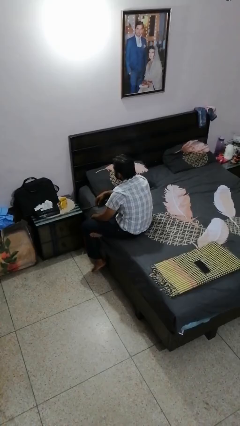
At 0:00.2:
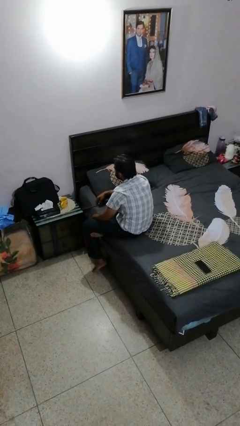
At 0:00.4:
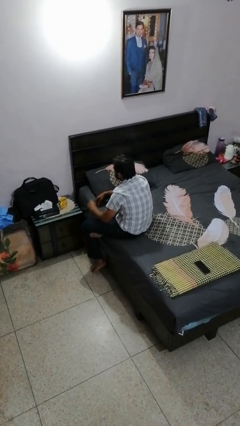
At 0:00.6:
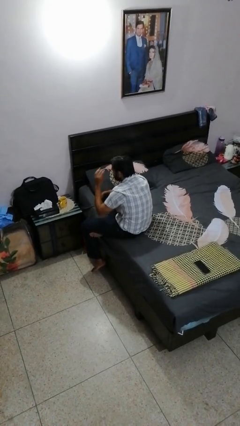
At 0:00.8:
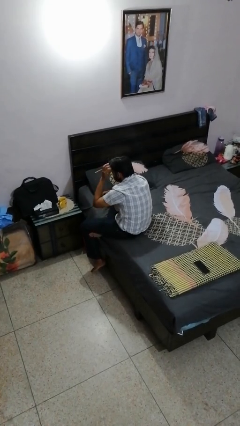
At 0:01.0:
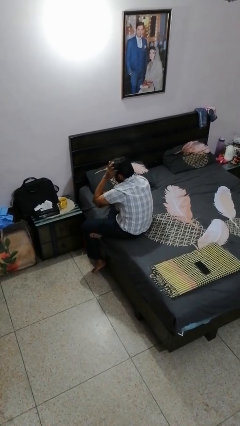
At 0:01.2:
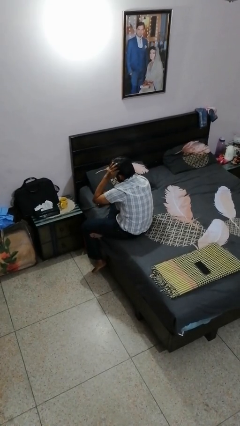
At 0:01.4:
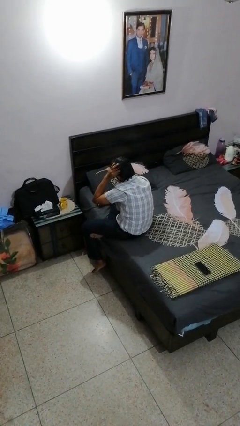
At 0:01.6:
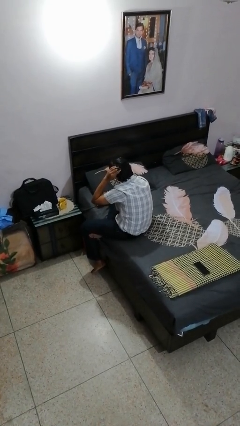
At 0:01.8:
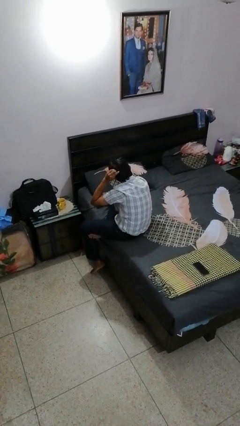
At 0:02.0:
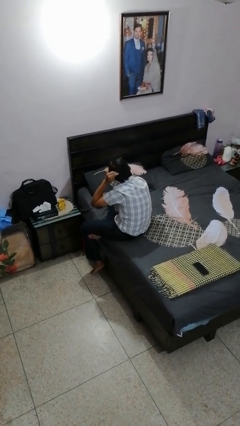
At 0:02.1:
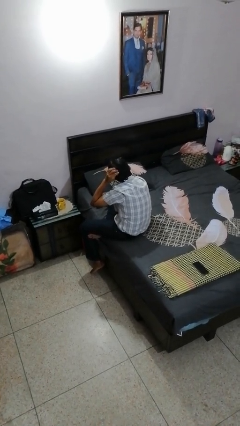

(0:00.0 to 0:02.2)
person strokes hair

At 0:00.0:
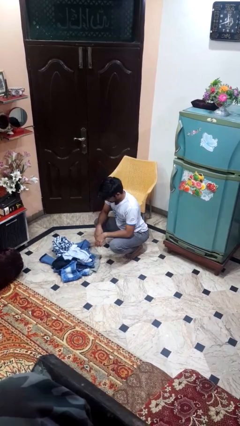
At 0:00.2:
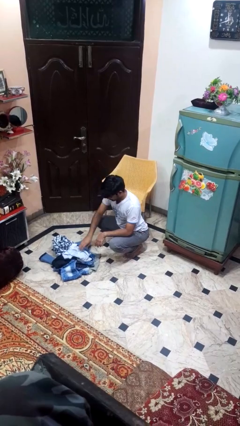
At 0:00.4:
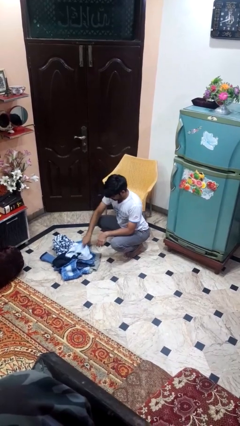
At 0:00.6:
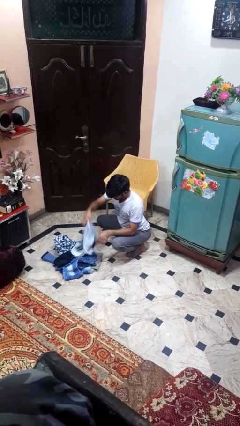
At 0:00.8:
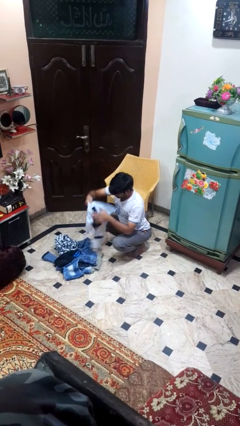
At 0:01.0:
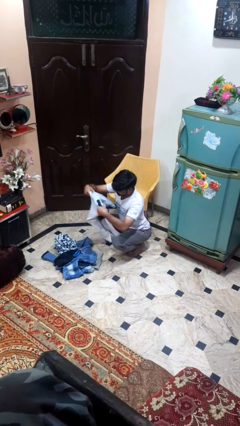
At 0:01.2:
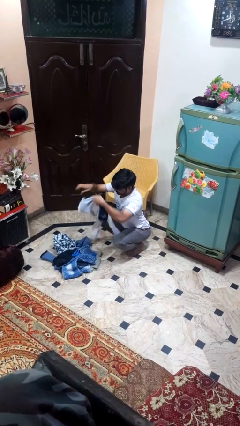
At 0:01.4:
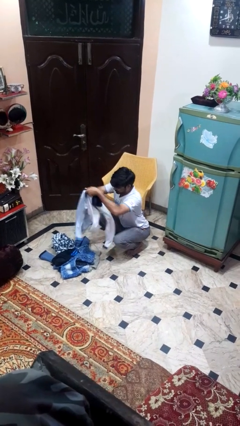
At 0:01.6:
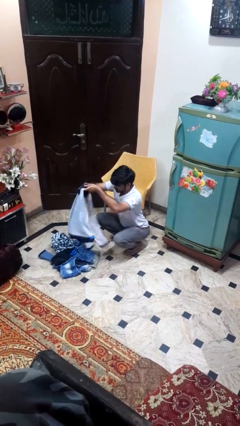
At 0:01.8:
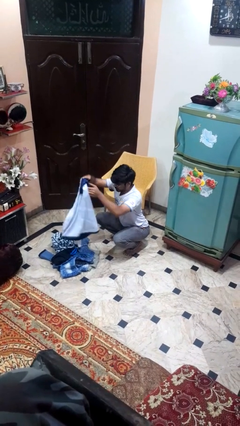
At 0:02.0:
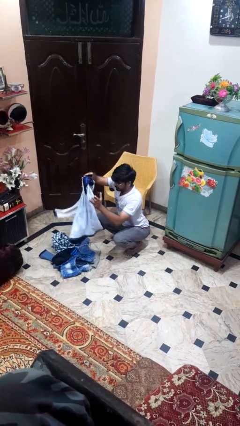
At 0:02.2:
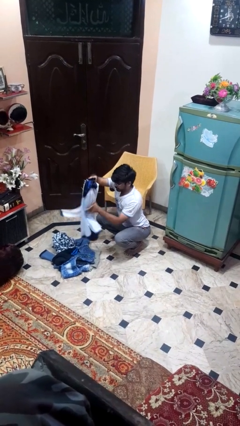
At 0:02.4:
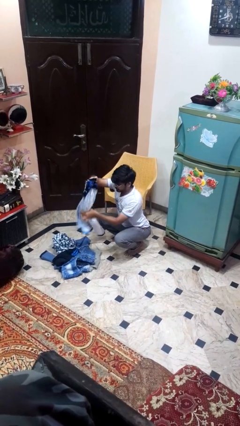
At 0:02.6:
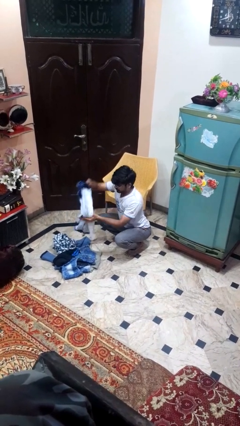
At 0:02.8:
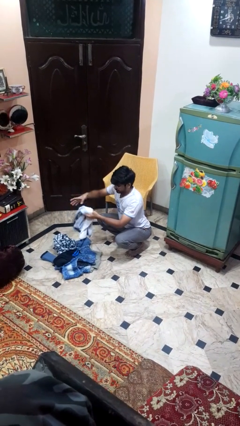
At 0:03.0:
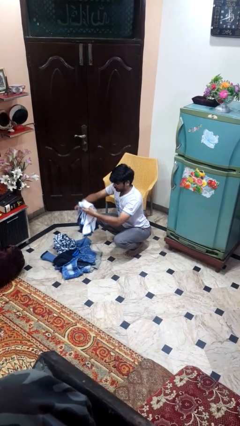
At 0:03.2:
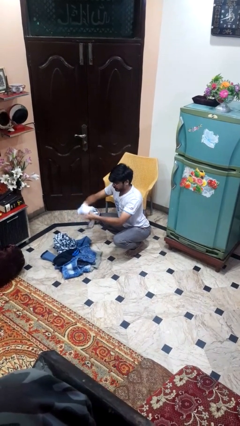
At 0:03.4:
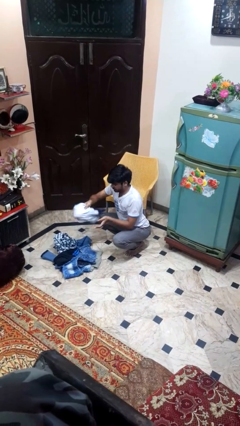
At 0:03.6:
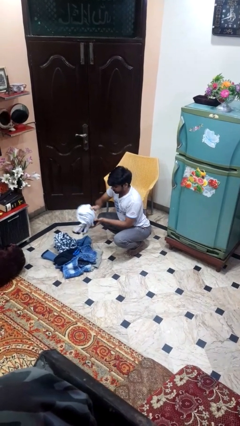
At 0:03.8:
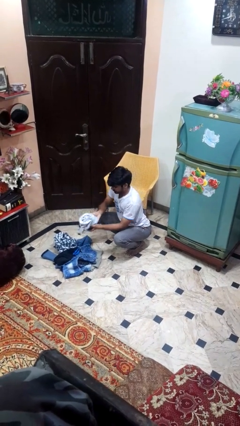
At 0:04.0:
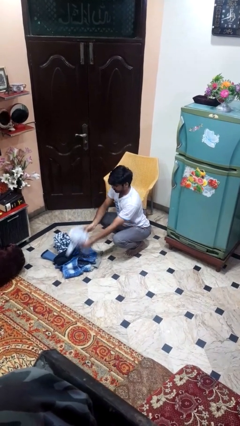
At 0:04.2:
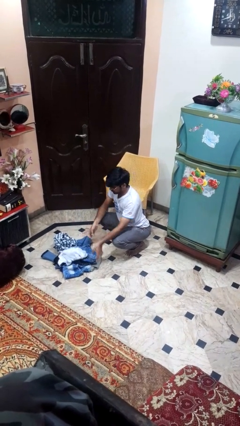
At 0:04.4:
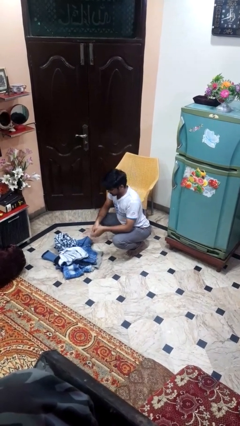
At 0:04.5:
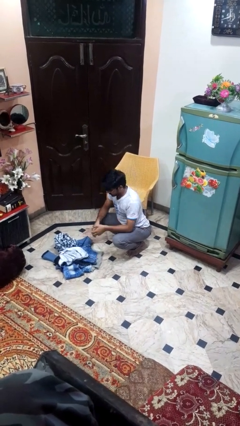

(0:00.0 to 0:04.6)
person folds pants

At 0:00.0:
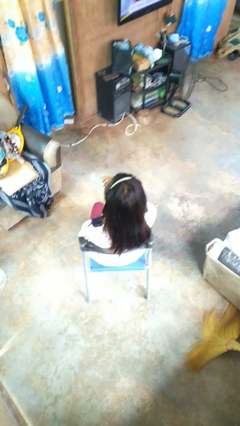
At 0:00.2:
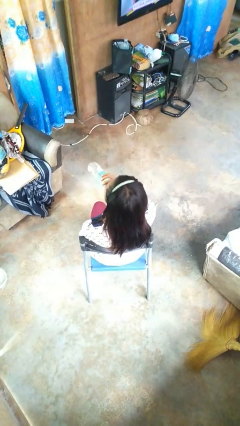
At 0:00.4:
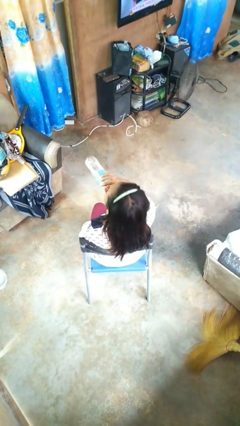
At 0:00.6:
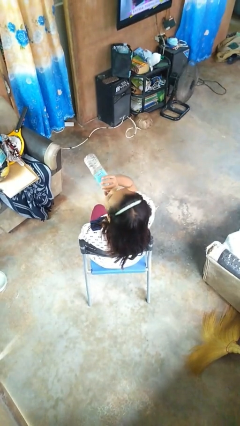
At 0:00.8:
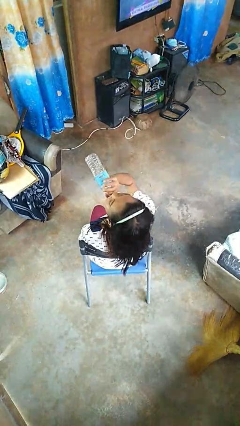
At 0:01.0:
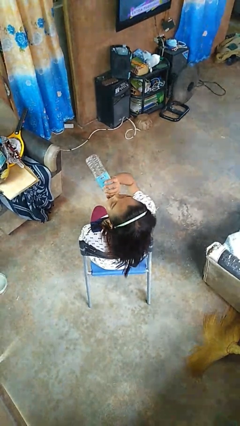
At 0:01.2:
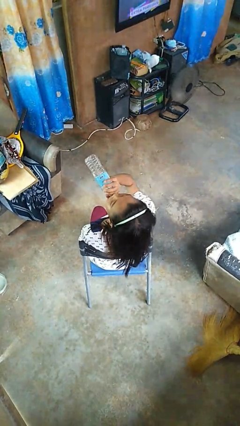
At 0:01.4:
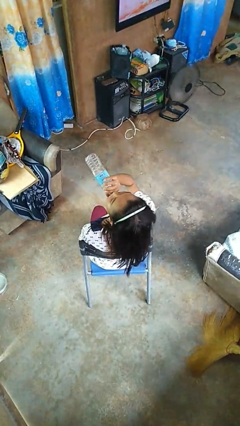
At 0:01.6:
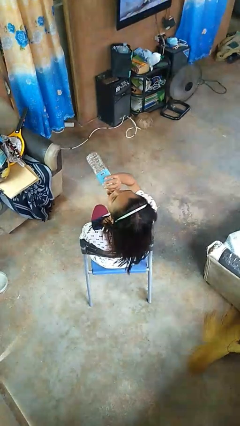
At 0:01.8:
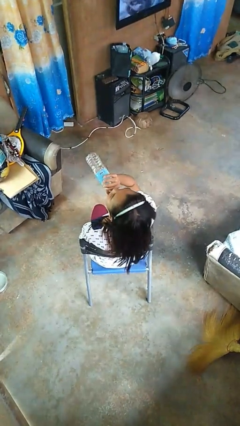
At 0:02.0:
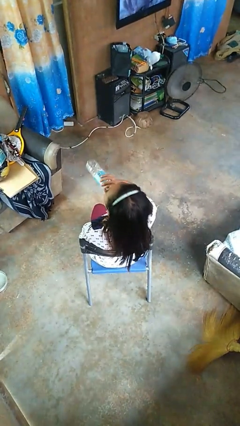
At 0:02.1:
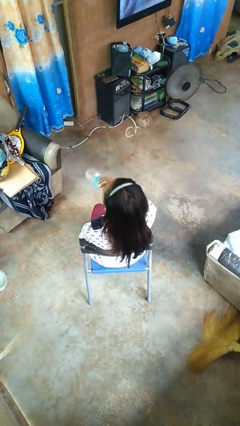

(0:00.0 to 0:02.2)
person drinks from bottle

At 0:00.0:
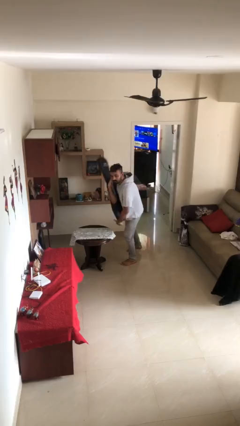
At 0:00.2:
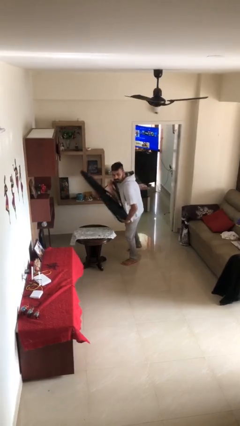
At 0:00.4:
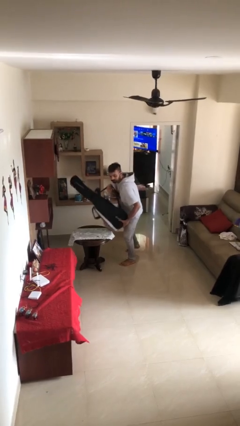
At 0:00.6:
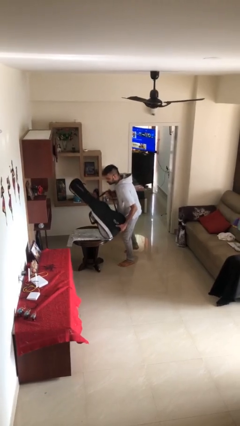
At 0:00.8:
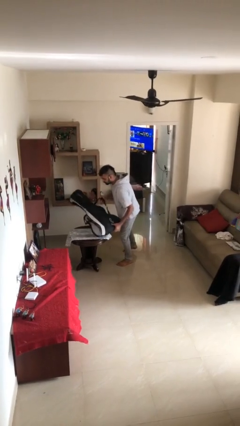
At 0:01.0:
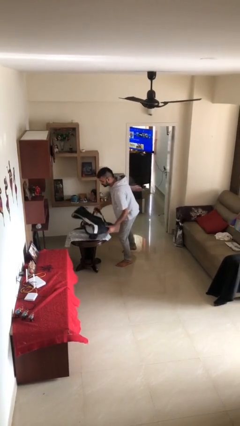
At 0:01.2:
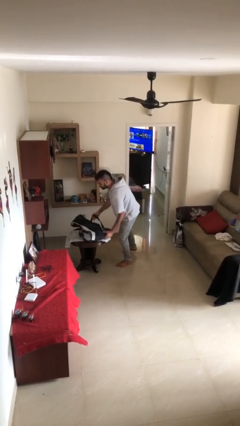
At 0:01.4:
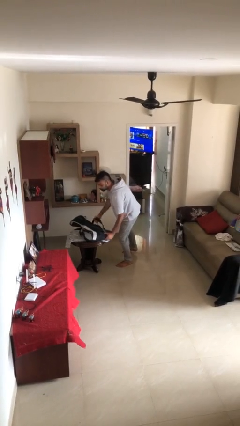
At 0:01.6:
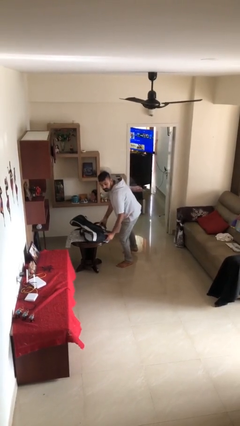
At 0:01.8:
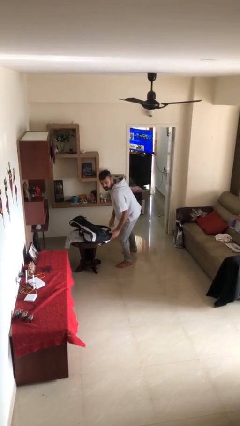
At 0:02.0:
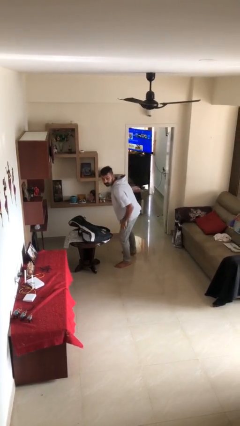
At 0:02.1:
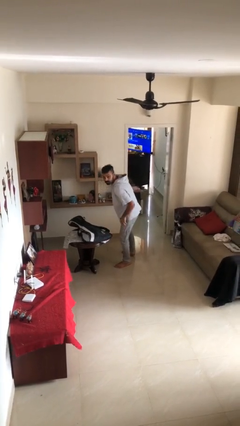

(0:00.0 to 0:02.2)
person puts down object on table

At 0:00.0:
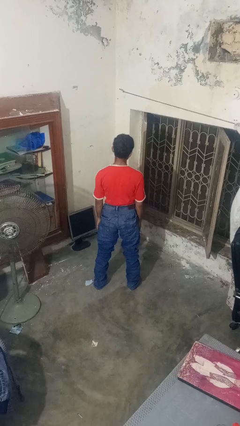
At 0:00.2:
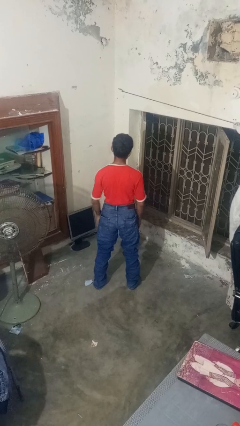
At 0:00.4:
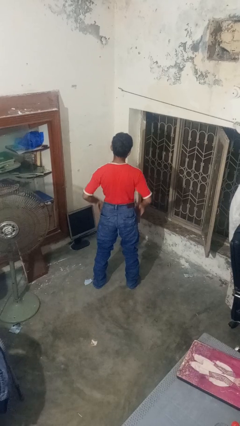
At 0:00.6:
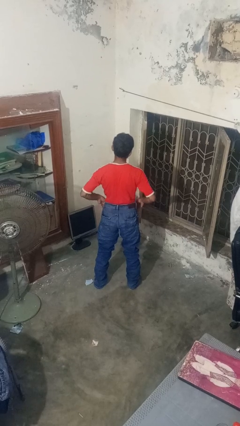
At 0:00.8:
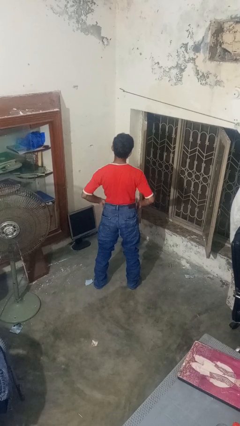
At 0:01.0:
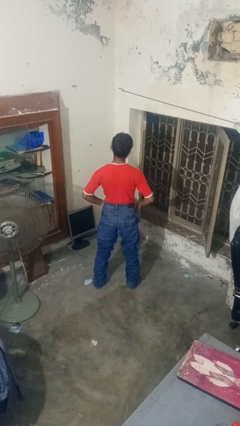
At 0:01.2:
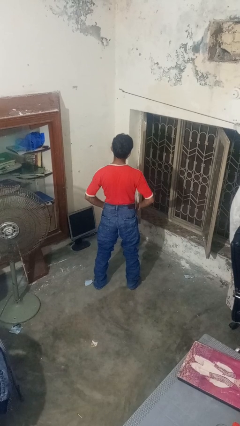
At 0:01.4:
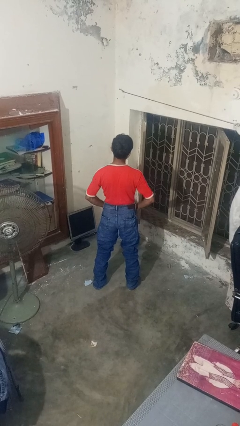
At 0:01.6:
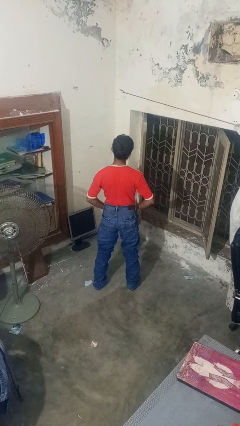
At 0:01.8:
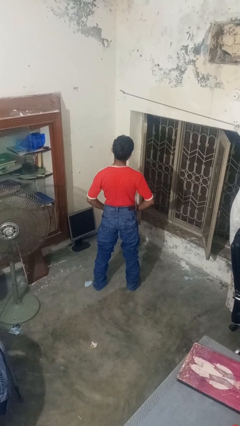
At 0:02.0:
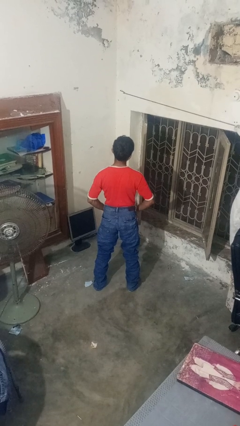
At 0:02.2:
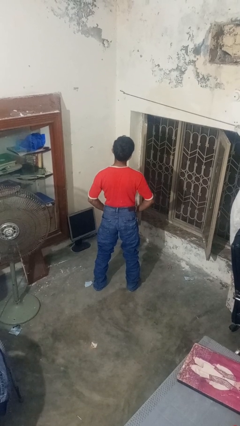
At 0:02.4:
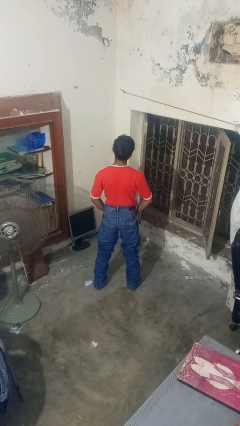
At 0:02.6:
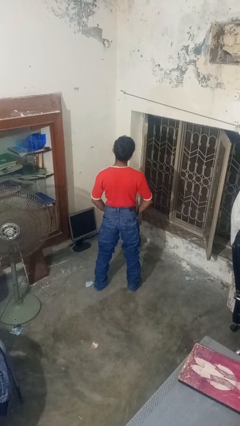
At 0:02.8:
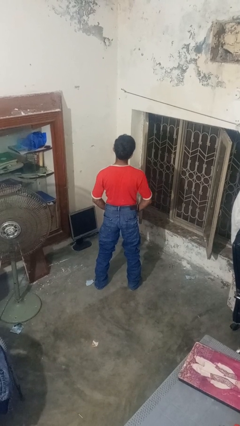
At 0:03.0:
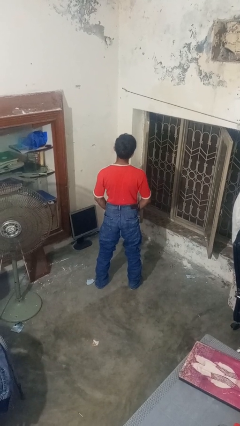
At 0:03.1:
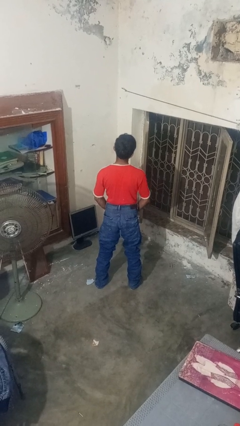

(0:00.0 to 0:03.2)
person puts hands in back pockets

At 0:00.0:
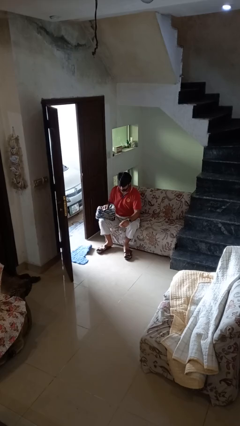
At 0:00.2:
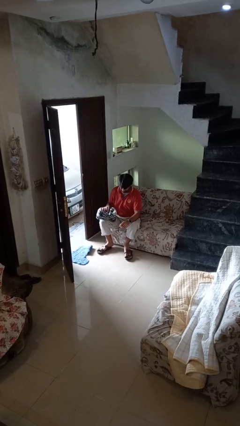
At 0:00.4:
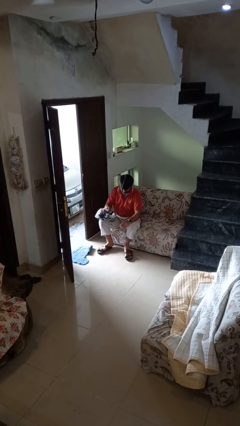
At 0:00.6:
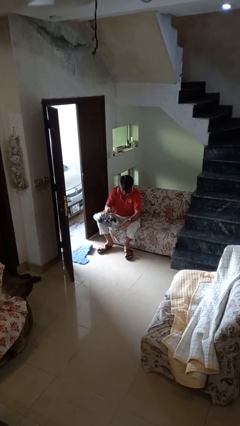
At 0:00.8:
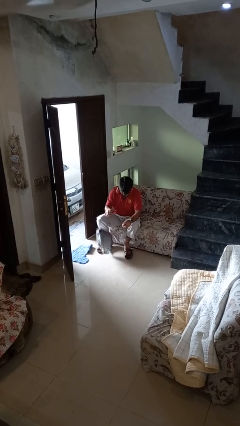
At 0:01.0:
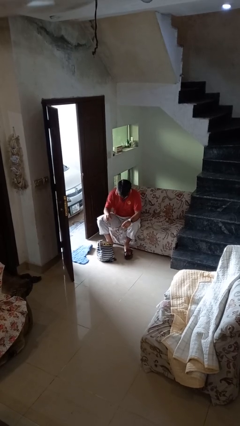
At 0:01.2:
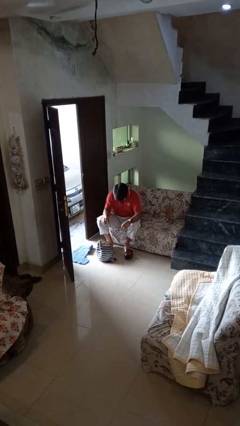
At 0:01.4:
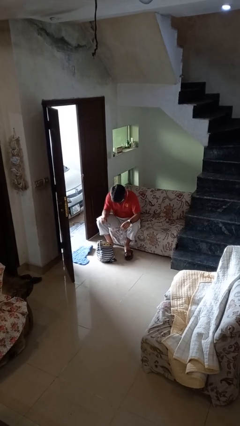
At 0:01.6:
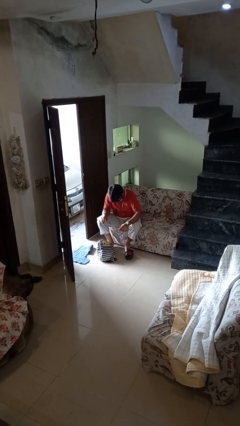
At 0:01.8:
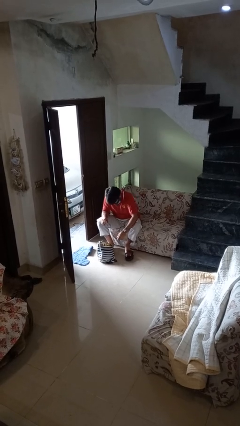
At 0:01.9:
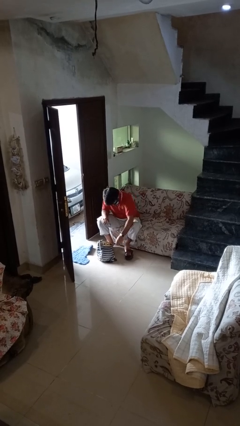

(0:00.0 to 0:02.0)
person drops object

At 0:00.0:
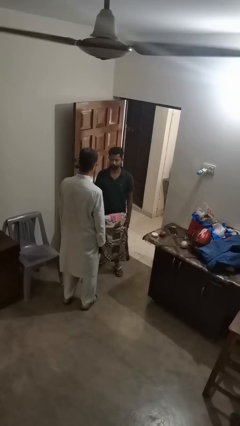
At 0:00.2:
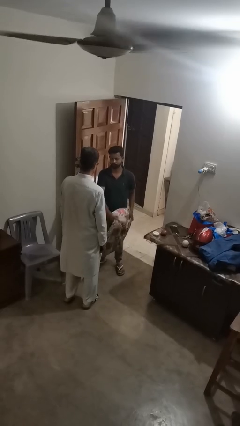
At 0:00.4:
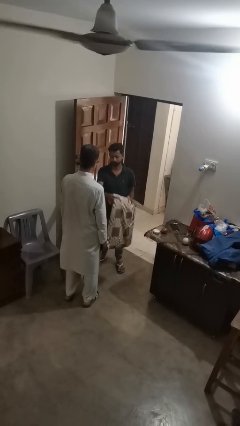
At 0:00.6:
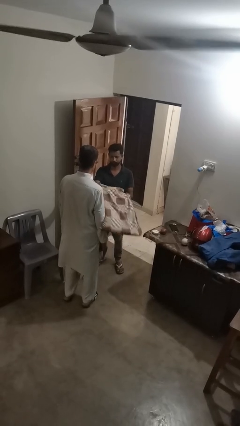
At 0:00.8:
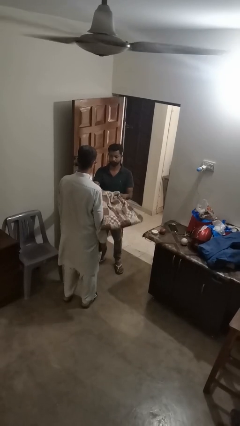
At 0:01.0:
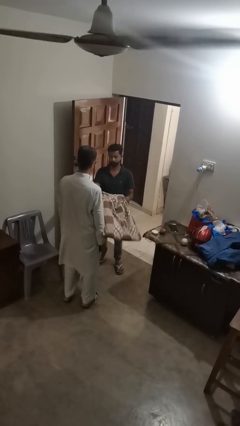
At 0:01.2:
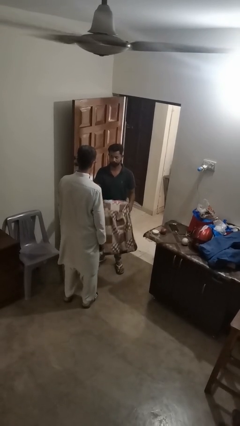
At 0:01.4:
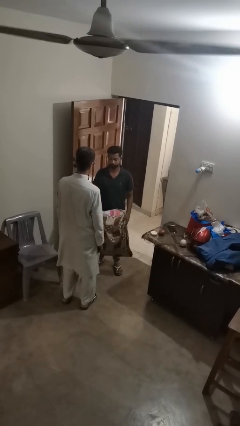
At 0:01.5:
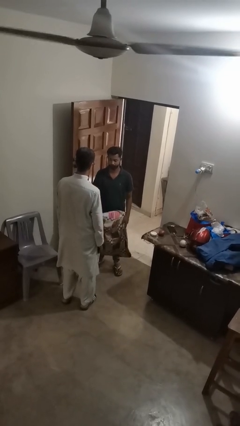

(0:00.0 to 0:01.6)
person hits person with pillow
